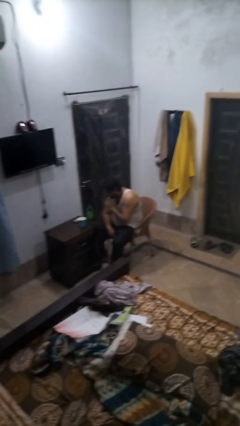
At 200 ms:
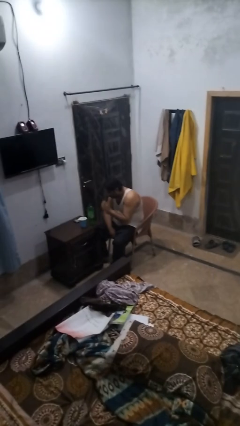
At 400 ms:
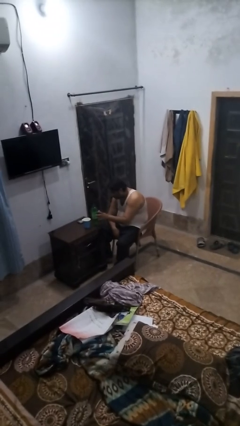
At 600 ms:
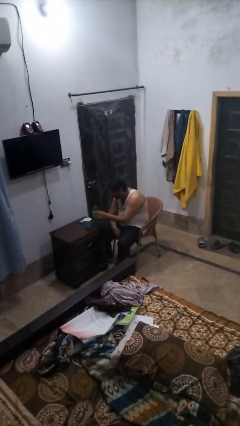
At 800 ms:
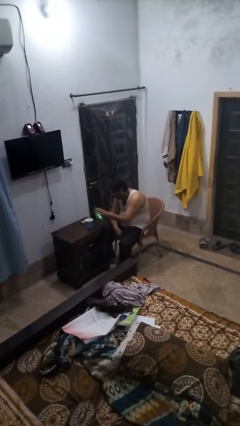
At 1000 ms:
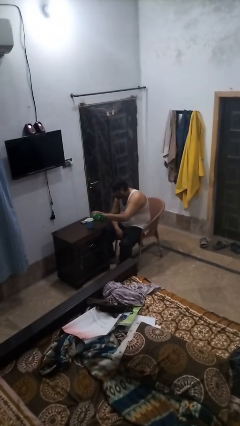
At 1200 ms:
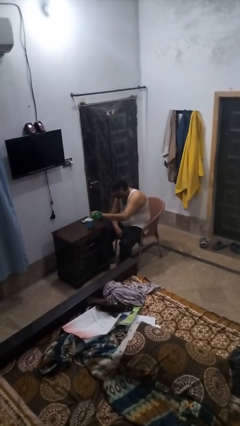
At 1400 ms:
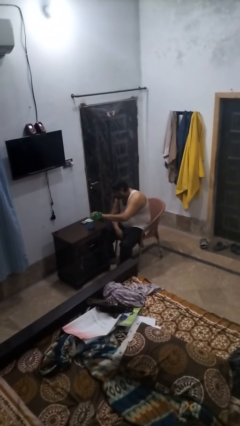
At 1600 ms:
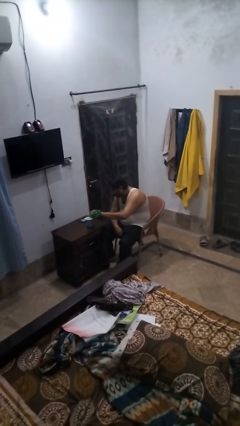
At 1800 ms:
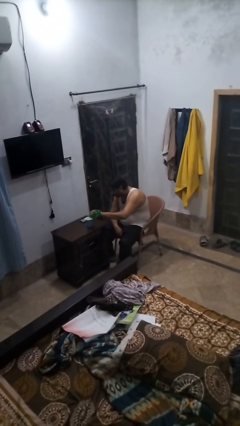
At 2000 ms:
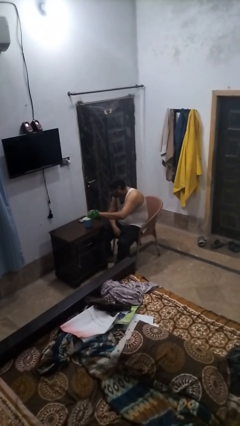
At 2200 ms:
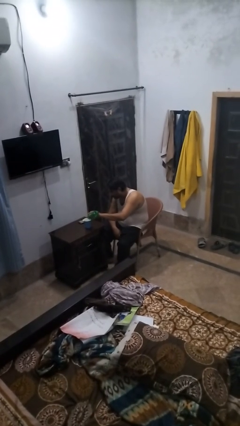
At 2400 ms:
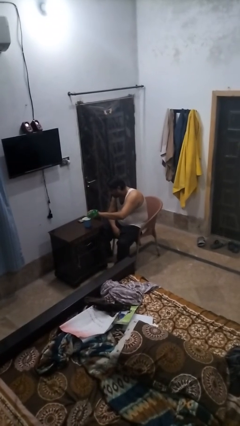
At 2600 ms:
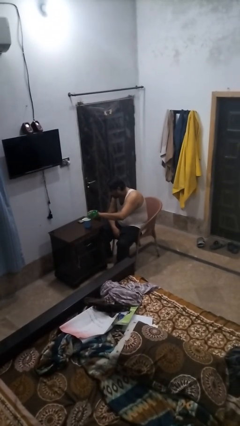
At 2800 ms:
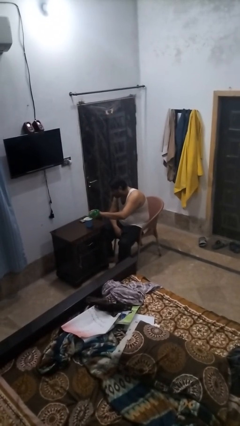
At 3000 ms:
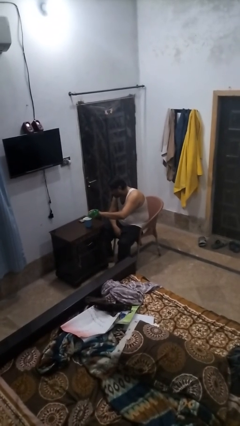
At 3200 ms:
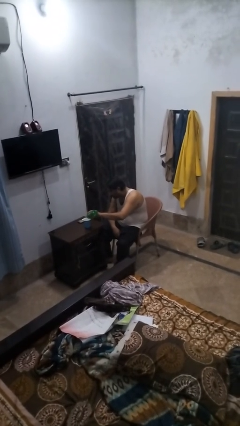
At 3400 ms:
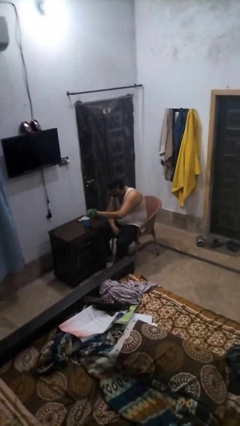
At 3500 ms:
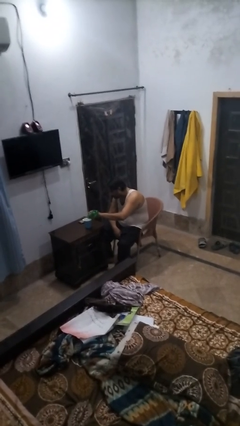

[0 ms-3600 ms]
person pours liquid into cup

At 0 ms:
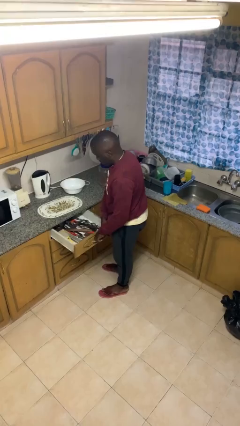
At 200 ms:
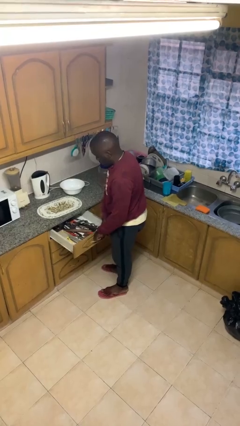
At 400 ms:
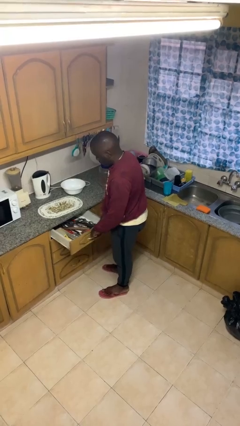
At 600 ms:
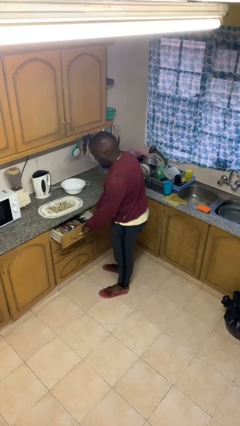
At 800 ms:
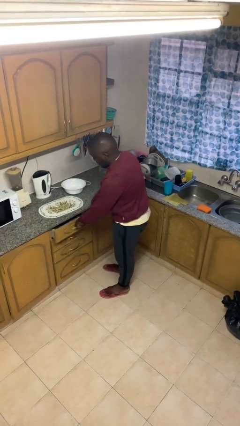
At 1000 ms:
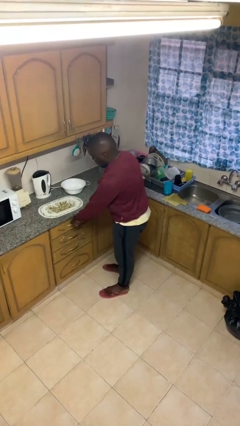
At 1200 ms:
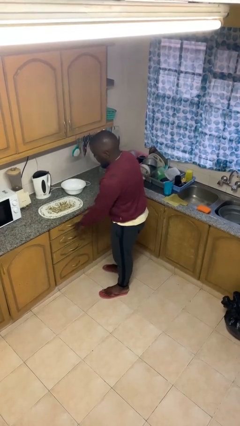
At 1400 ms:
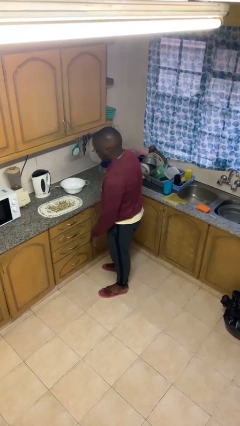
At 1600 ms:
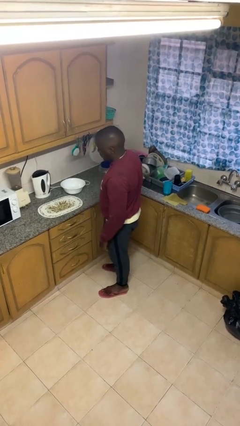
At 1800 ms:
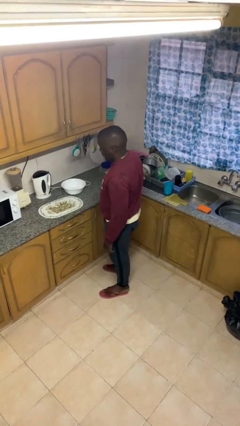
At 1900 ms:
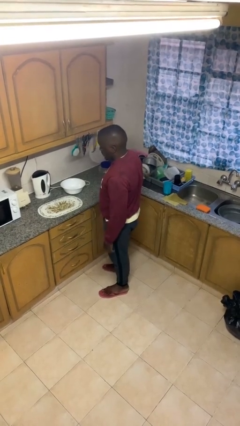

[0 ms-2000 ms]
person closes kitchen drawer

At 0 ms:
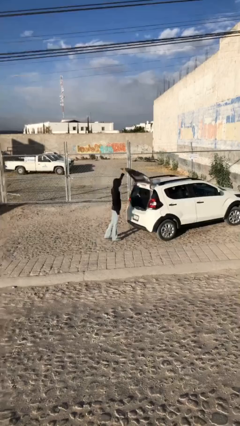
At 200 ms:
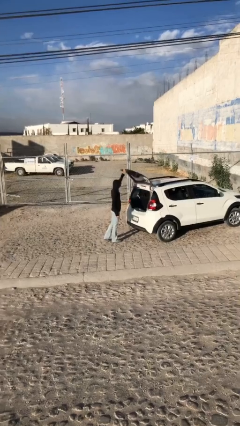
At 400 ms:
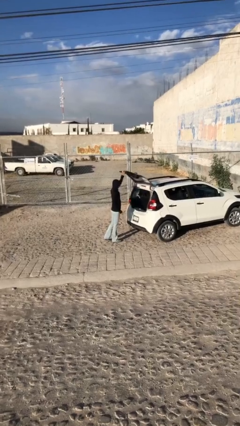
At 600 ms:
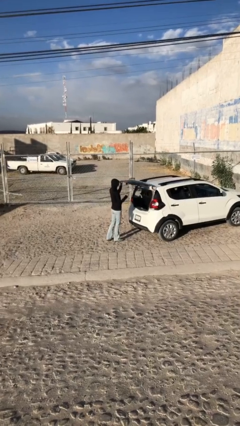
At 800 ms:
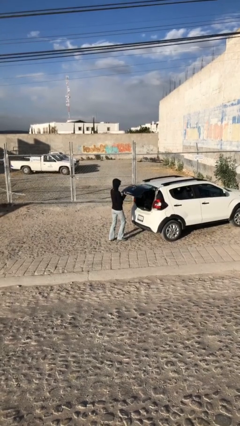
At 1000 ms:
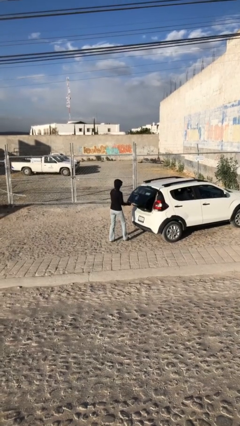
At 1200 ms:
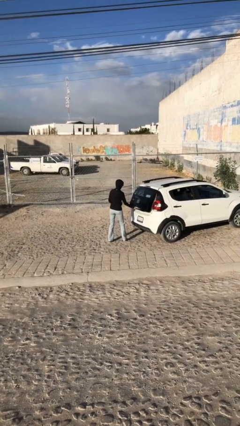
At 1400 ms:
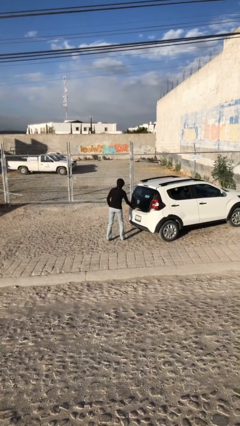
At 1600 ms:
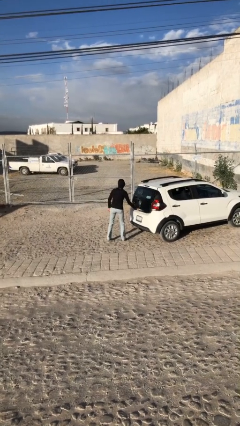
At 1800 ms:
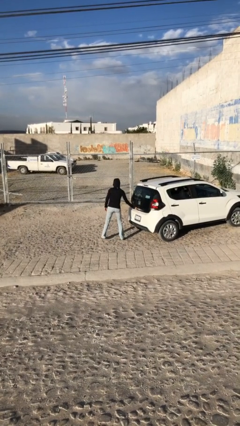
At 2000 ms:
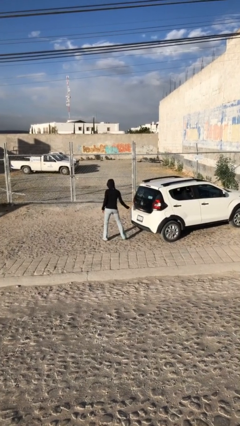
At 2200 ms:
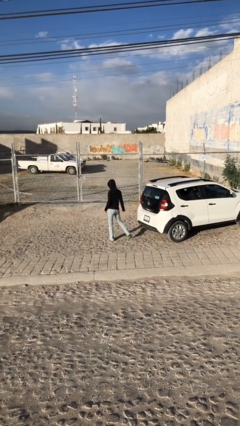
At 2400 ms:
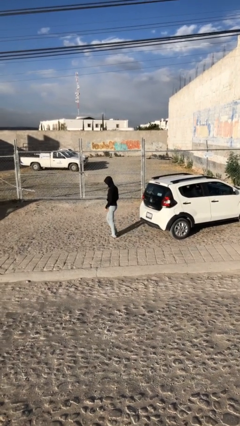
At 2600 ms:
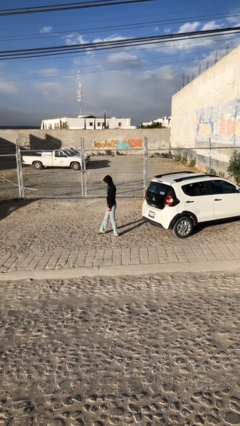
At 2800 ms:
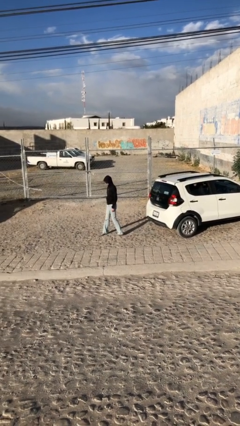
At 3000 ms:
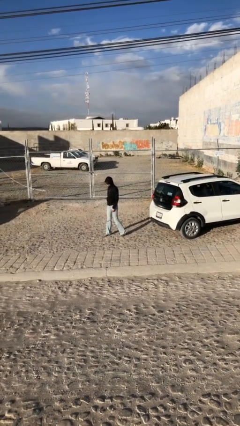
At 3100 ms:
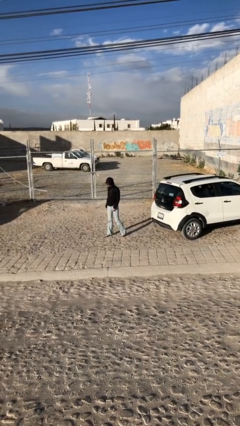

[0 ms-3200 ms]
person closes car trunk

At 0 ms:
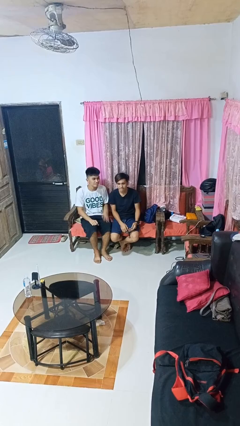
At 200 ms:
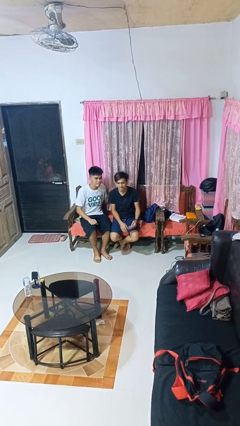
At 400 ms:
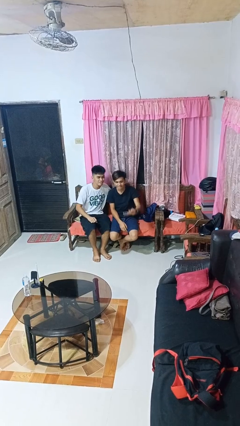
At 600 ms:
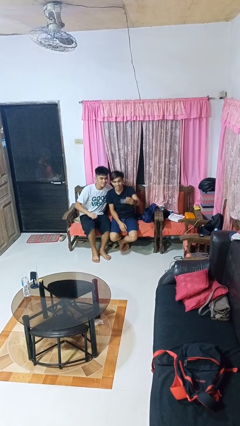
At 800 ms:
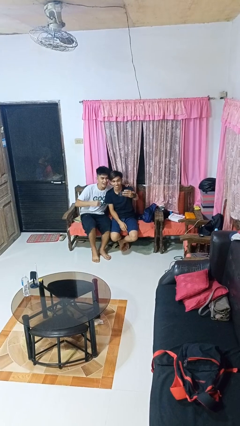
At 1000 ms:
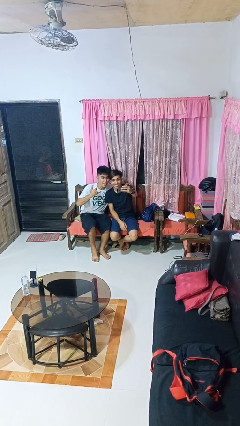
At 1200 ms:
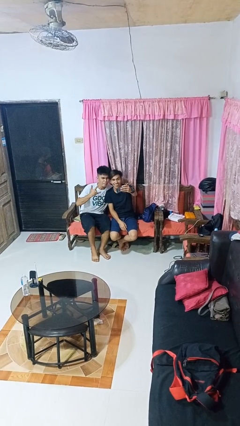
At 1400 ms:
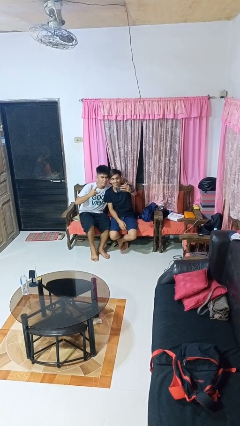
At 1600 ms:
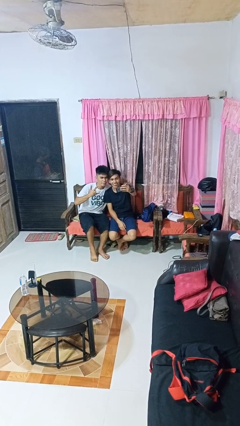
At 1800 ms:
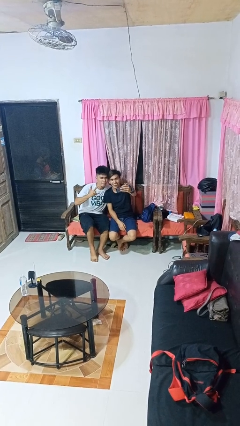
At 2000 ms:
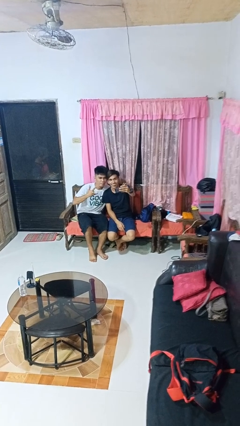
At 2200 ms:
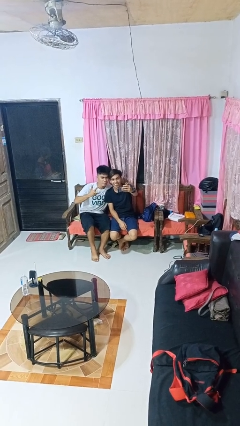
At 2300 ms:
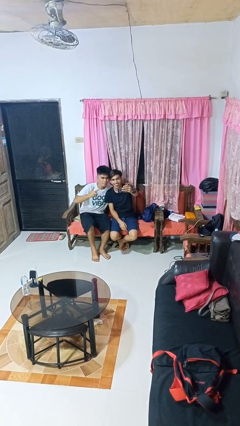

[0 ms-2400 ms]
person takes selfie with person

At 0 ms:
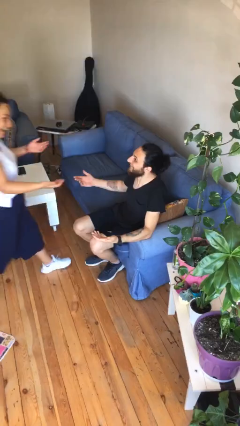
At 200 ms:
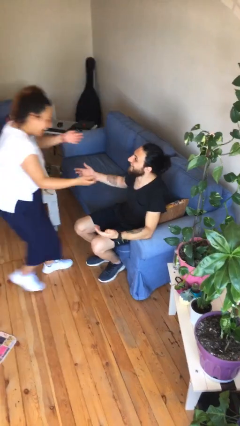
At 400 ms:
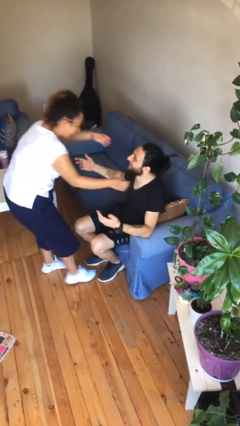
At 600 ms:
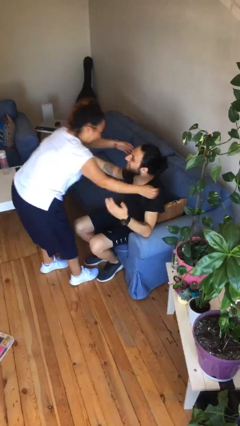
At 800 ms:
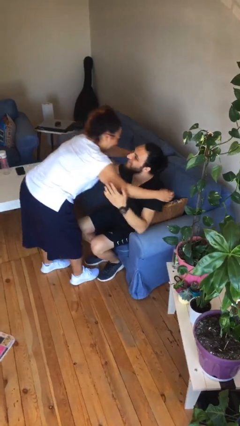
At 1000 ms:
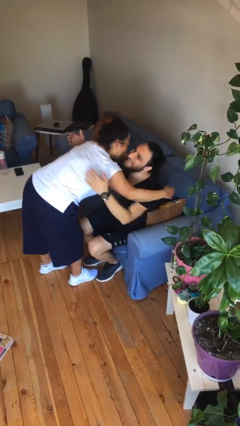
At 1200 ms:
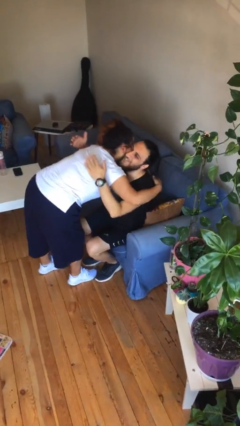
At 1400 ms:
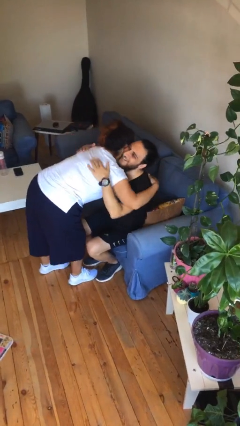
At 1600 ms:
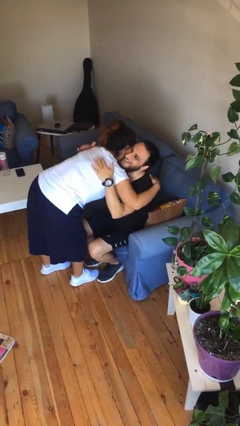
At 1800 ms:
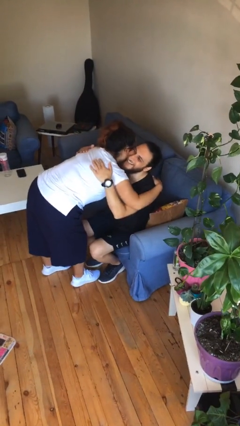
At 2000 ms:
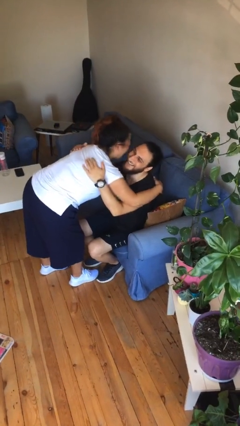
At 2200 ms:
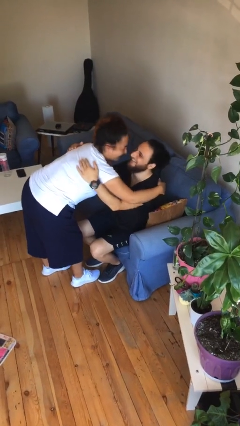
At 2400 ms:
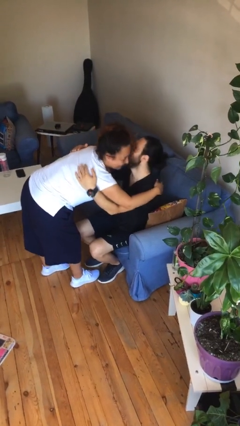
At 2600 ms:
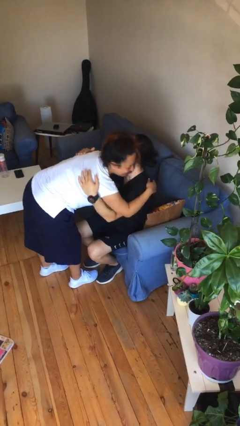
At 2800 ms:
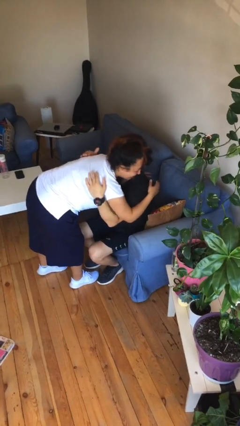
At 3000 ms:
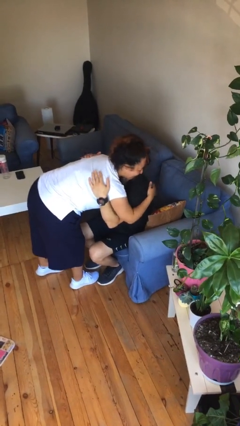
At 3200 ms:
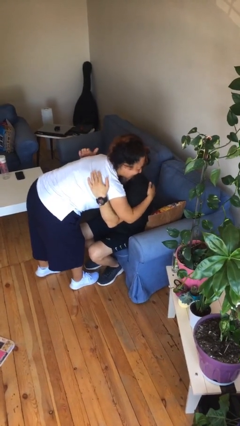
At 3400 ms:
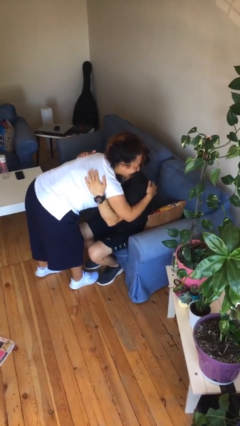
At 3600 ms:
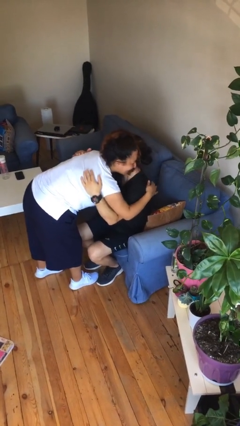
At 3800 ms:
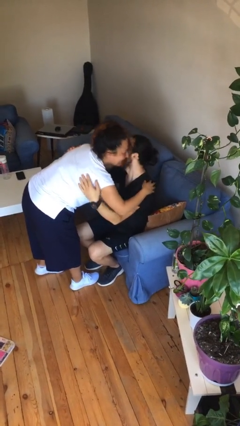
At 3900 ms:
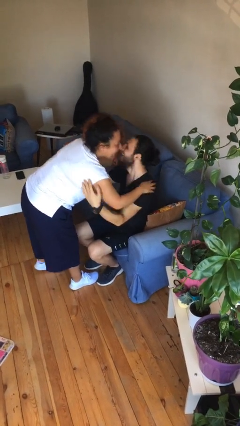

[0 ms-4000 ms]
person embraces person

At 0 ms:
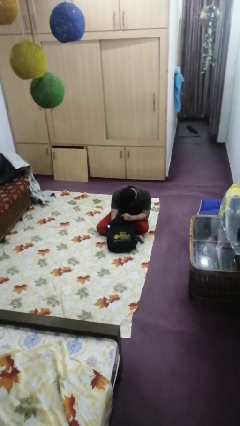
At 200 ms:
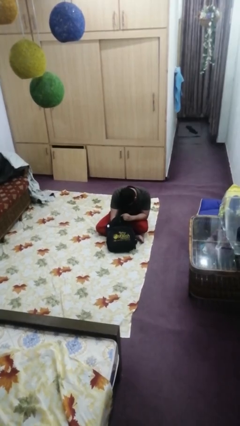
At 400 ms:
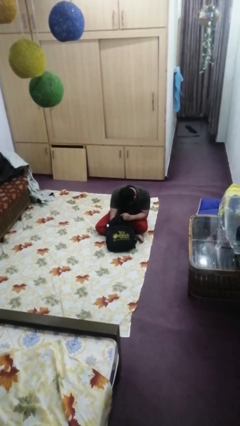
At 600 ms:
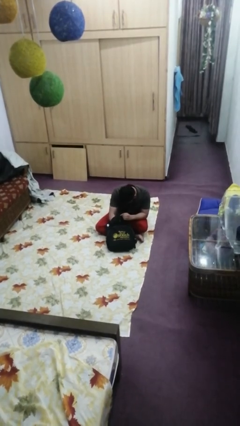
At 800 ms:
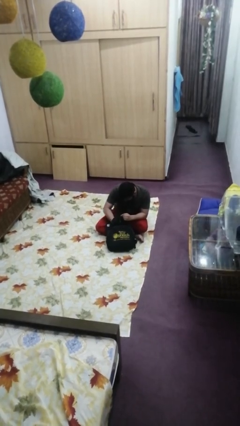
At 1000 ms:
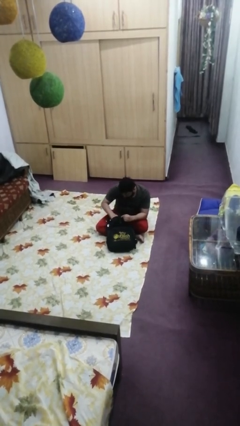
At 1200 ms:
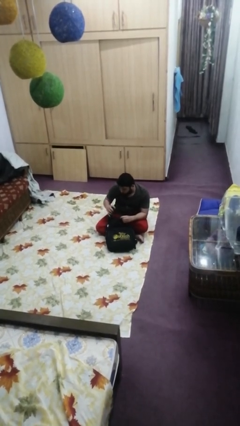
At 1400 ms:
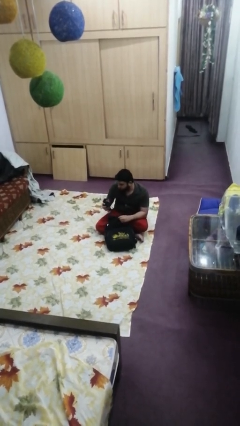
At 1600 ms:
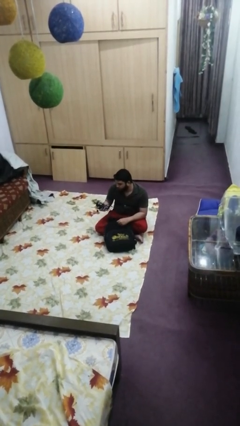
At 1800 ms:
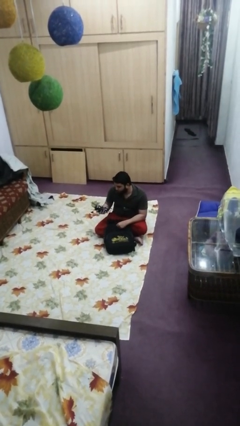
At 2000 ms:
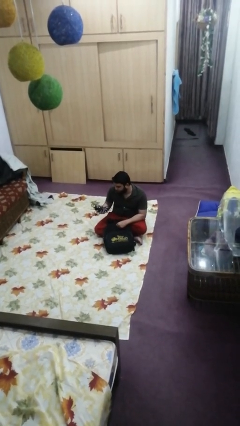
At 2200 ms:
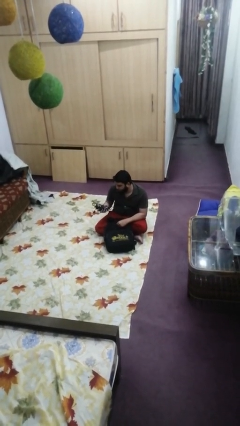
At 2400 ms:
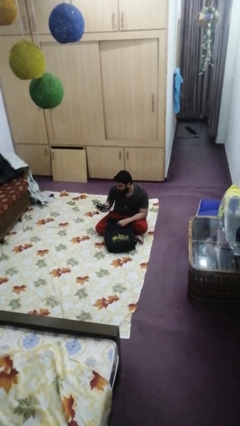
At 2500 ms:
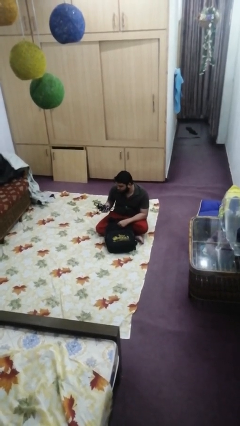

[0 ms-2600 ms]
person takes object from backpack
